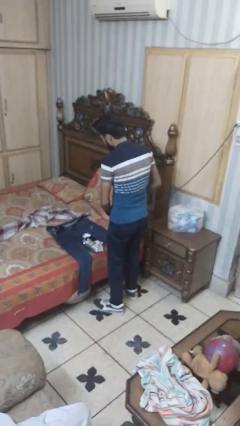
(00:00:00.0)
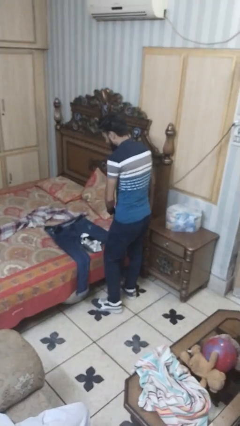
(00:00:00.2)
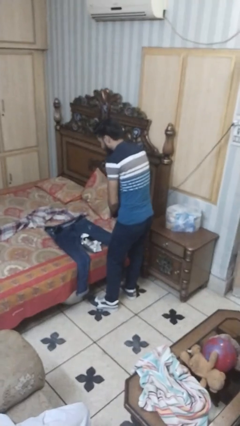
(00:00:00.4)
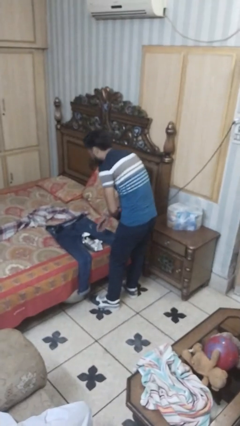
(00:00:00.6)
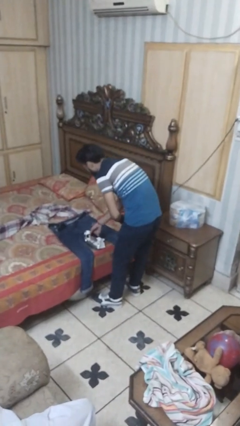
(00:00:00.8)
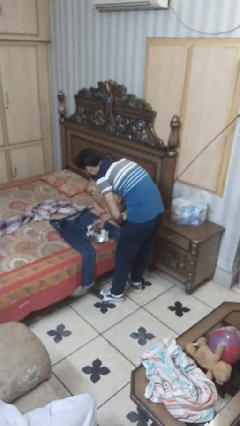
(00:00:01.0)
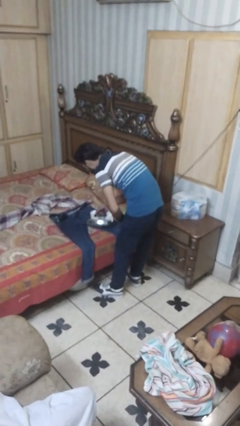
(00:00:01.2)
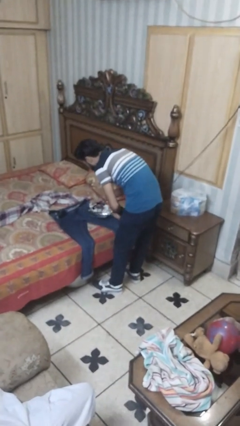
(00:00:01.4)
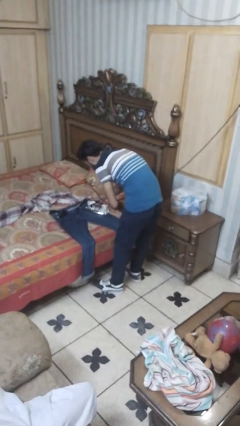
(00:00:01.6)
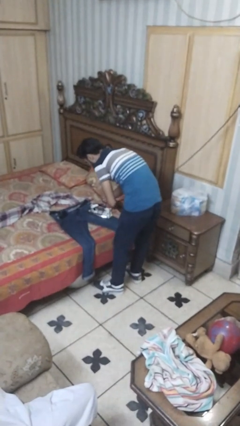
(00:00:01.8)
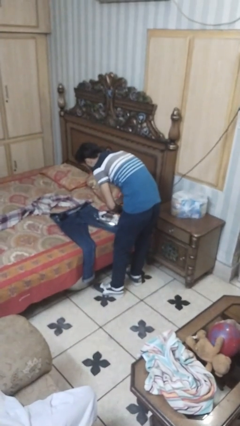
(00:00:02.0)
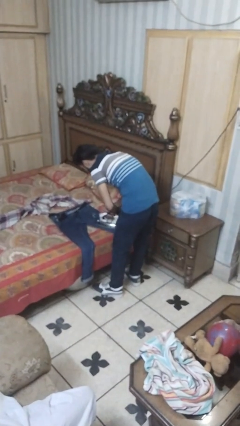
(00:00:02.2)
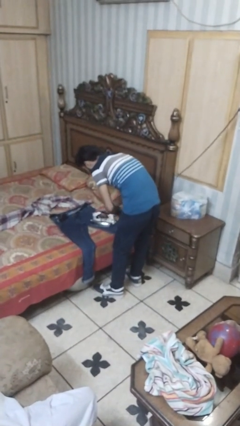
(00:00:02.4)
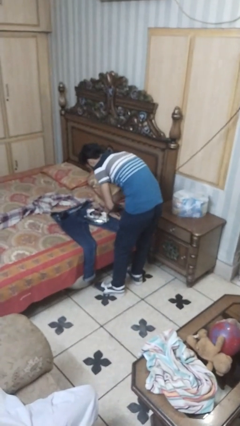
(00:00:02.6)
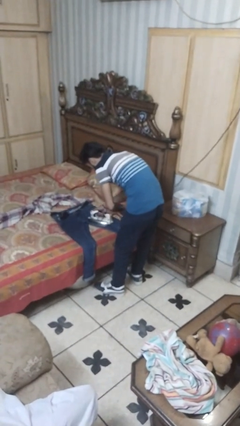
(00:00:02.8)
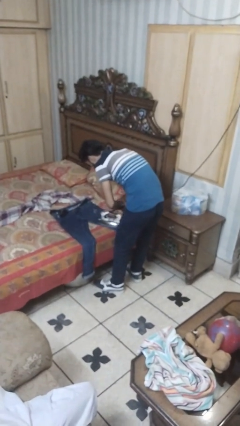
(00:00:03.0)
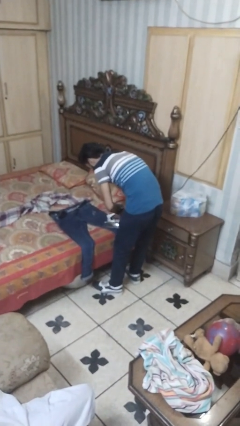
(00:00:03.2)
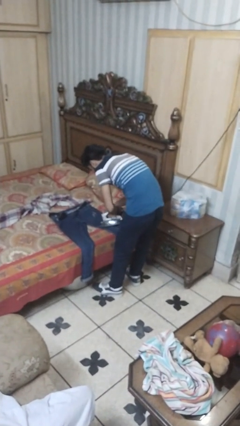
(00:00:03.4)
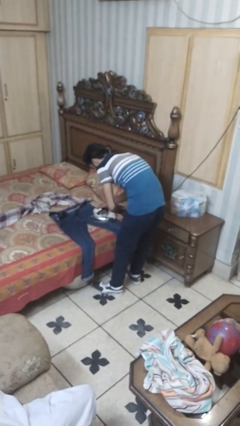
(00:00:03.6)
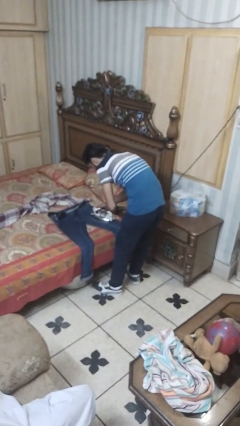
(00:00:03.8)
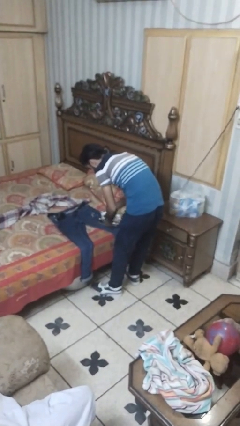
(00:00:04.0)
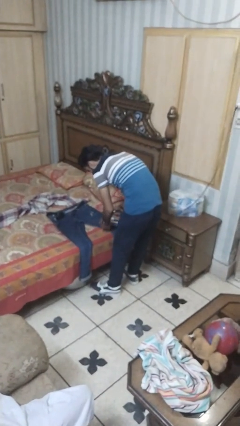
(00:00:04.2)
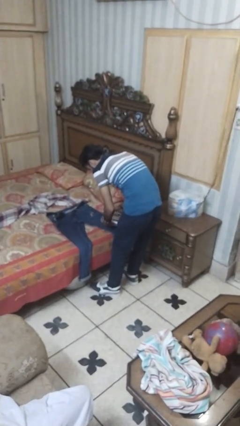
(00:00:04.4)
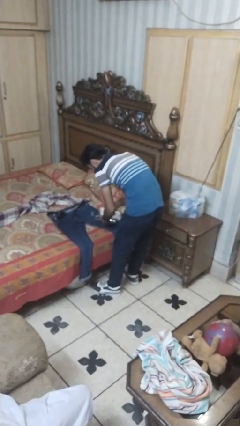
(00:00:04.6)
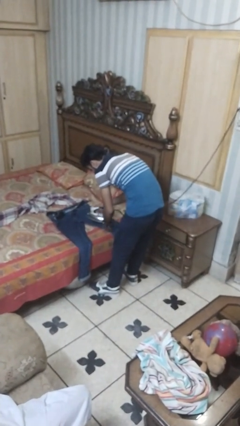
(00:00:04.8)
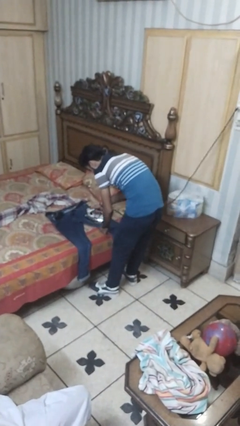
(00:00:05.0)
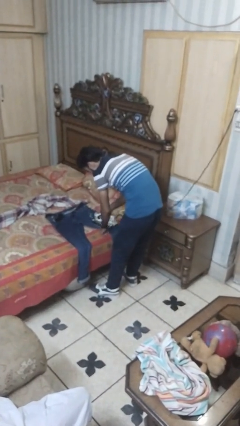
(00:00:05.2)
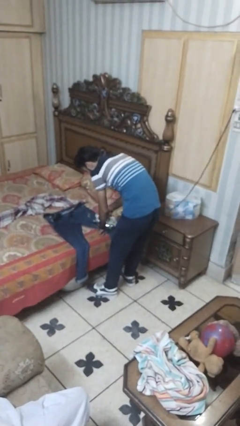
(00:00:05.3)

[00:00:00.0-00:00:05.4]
person irons clothes

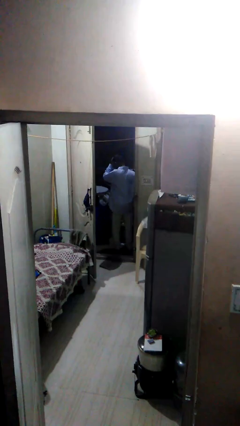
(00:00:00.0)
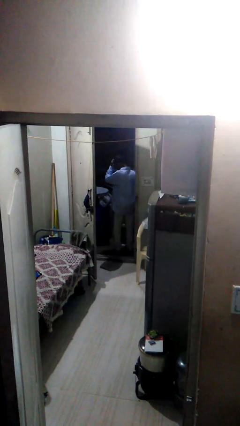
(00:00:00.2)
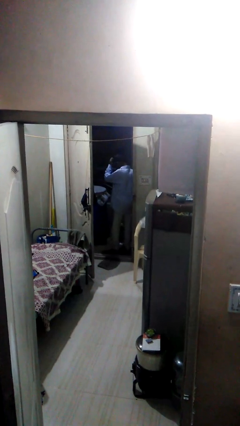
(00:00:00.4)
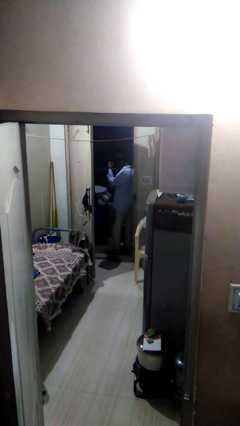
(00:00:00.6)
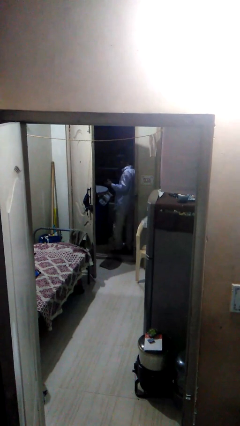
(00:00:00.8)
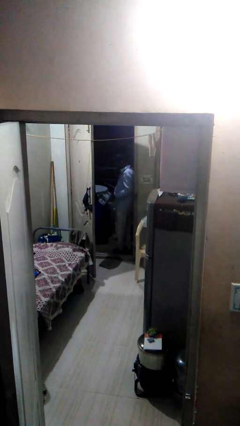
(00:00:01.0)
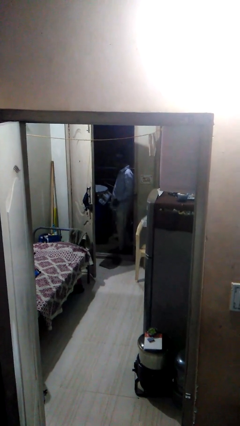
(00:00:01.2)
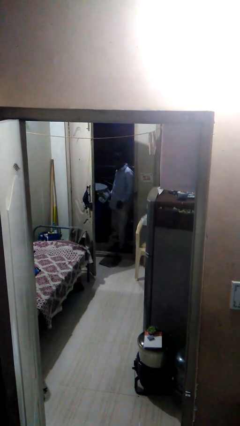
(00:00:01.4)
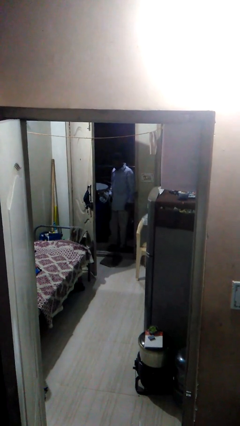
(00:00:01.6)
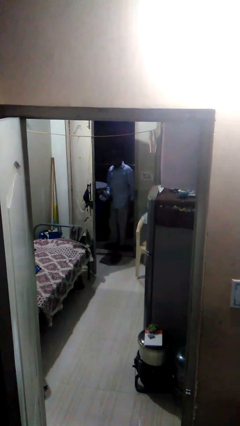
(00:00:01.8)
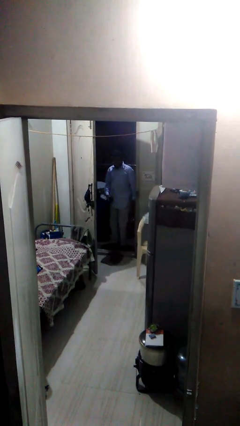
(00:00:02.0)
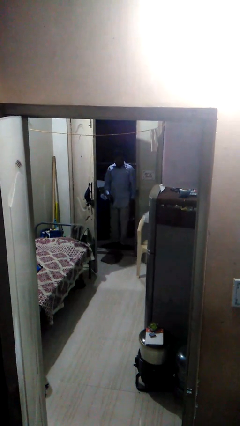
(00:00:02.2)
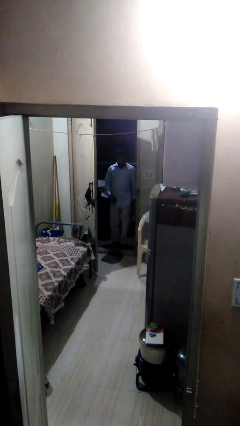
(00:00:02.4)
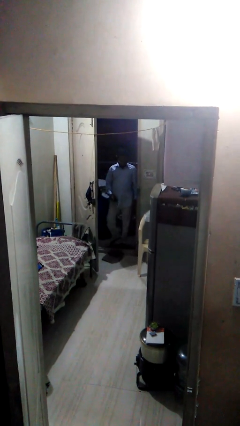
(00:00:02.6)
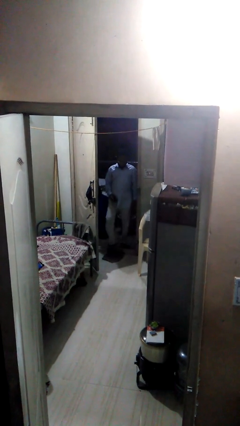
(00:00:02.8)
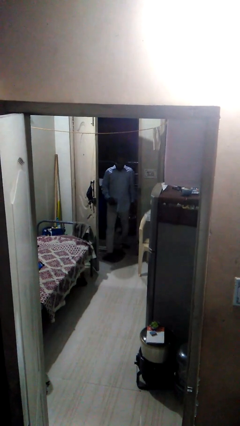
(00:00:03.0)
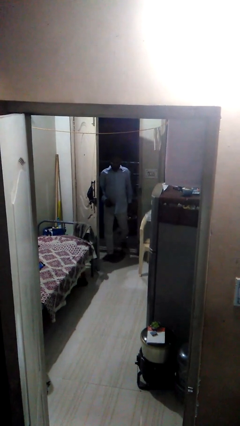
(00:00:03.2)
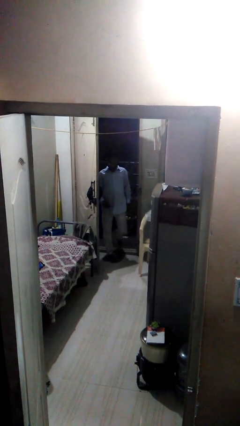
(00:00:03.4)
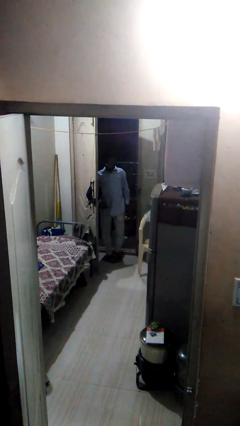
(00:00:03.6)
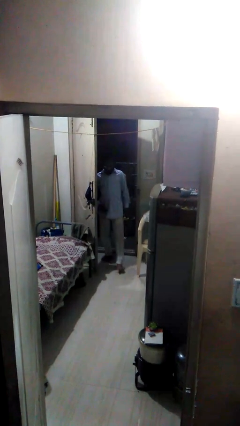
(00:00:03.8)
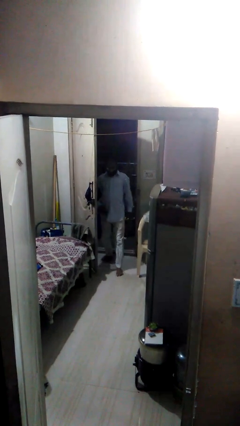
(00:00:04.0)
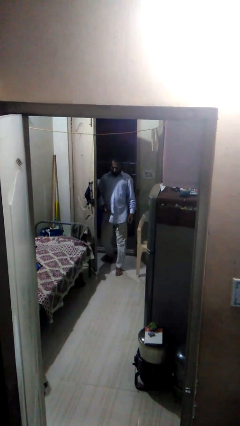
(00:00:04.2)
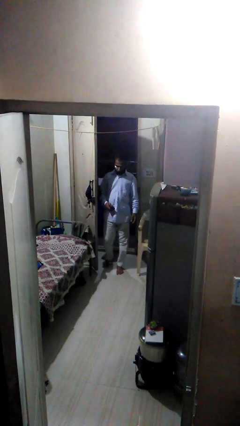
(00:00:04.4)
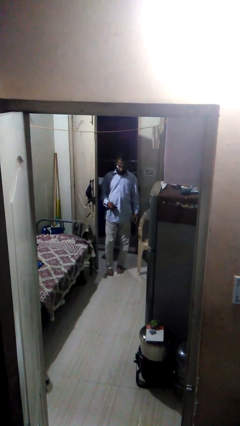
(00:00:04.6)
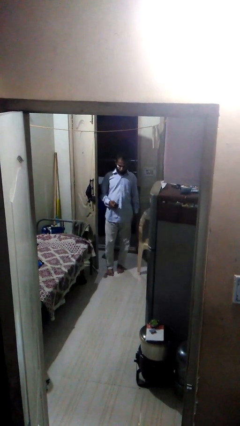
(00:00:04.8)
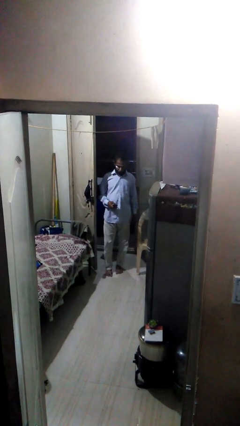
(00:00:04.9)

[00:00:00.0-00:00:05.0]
person enters scene through structure

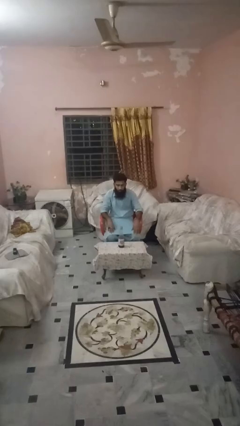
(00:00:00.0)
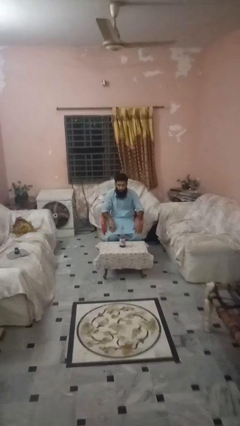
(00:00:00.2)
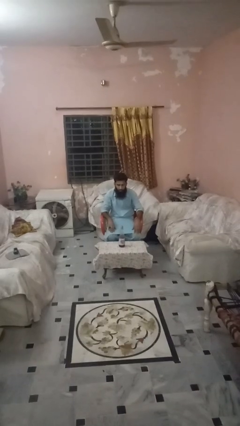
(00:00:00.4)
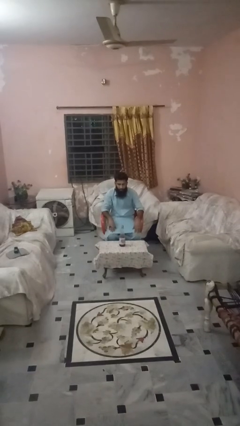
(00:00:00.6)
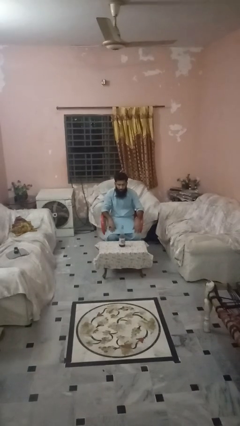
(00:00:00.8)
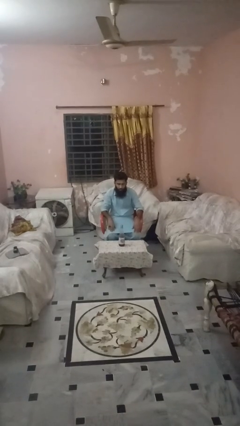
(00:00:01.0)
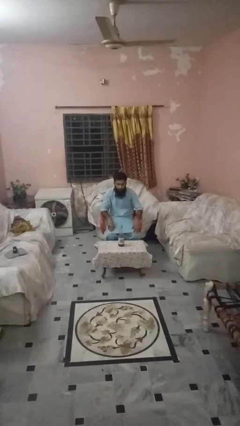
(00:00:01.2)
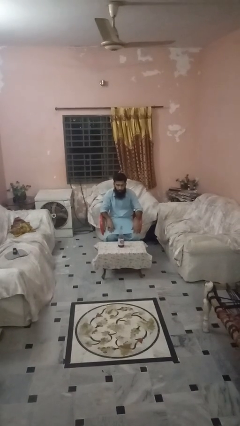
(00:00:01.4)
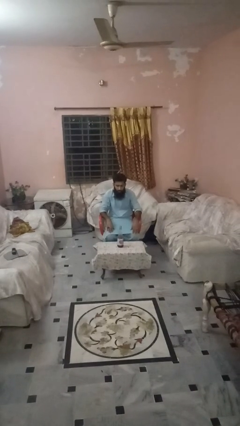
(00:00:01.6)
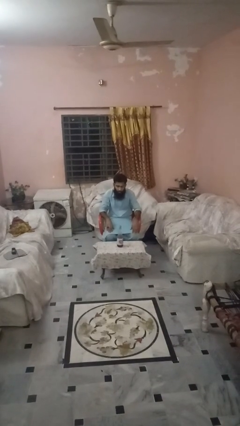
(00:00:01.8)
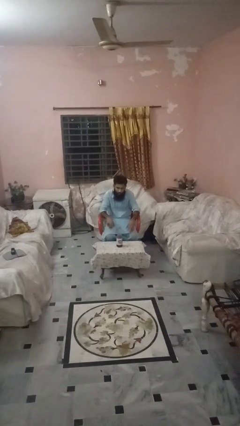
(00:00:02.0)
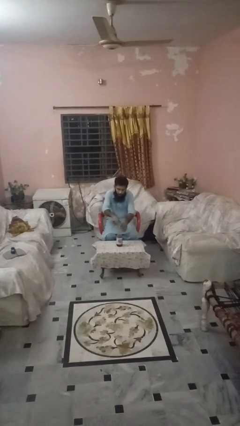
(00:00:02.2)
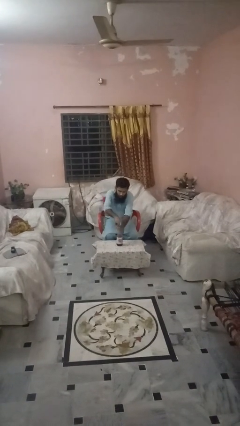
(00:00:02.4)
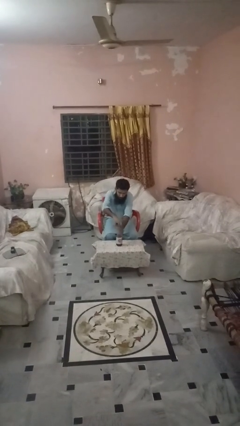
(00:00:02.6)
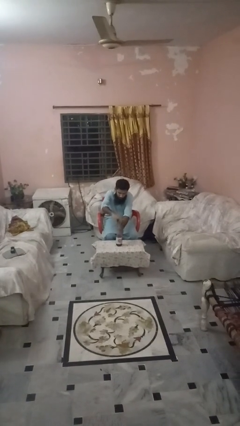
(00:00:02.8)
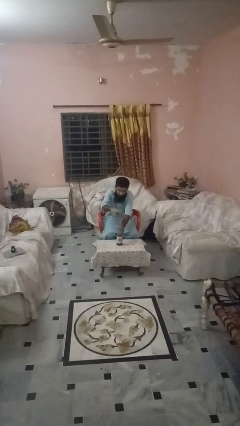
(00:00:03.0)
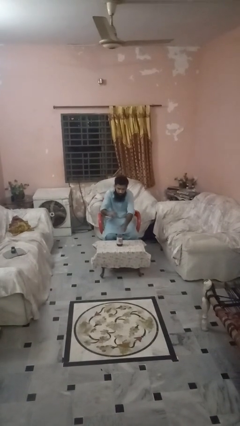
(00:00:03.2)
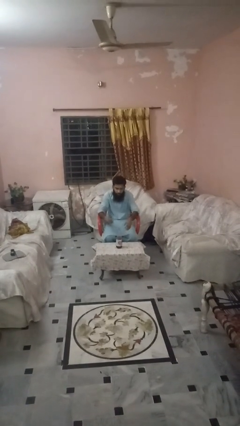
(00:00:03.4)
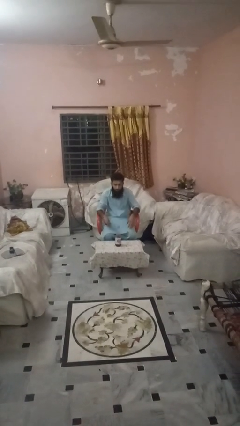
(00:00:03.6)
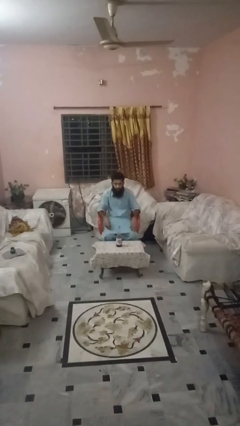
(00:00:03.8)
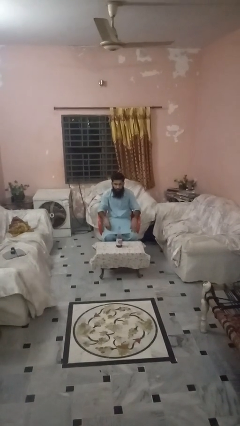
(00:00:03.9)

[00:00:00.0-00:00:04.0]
person unscrews lid from bottle

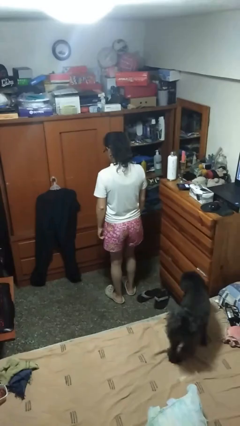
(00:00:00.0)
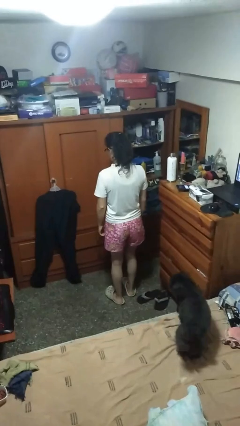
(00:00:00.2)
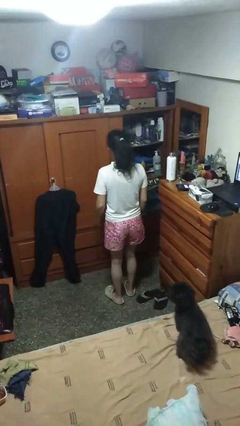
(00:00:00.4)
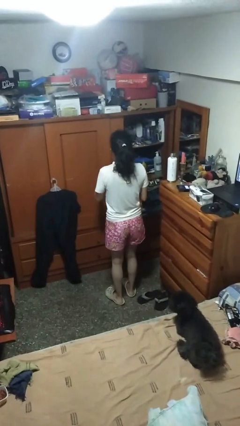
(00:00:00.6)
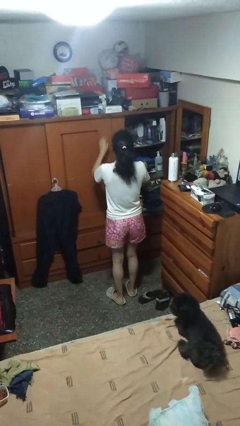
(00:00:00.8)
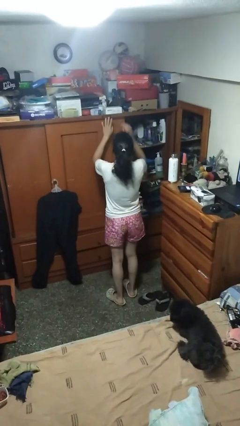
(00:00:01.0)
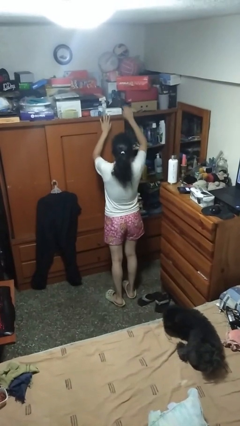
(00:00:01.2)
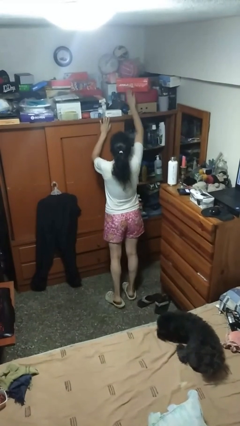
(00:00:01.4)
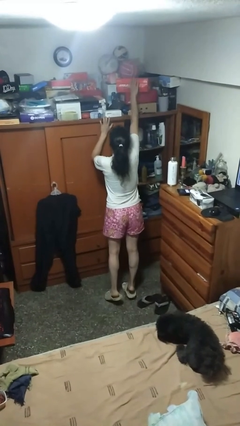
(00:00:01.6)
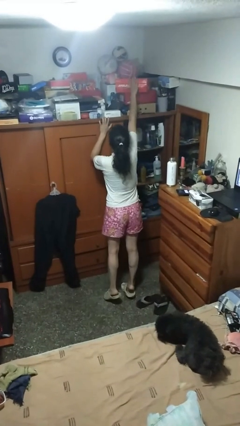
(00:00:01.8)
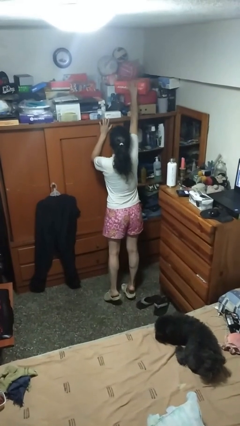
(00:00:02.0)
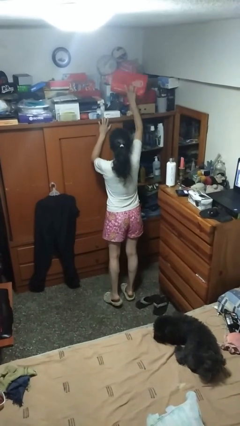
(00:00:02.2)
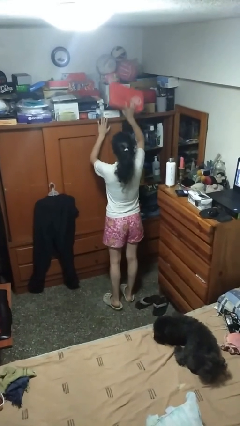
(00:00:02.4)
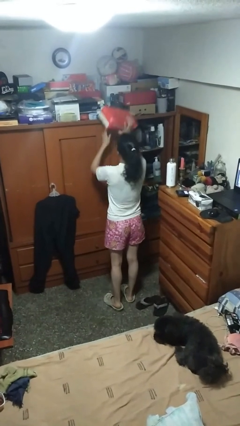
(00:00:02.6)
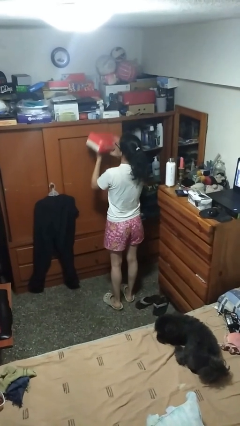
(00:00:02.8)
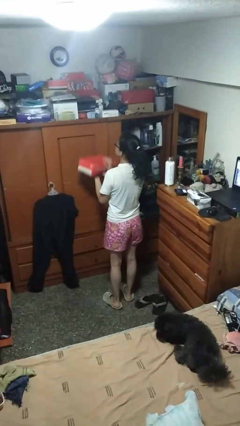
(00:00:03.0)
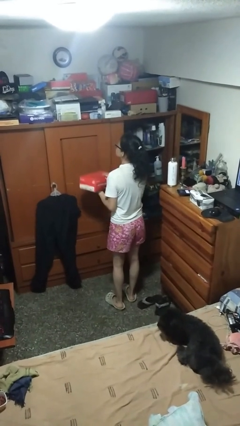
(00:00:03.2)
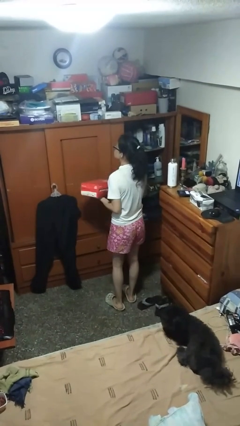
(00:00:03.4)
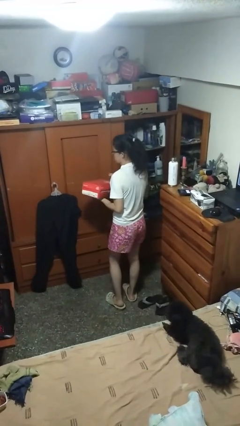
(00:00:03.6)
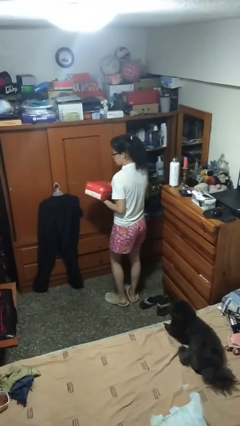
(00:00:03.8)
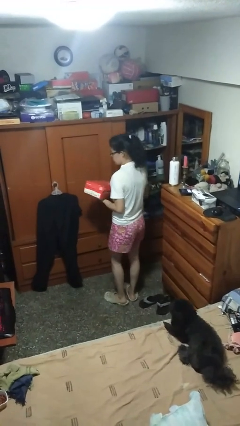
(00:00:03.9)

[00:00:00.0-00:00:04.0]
person picks up object from shelf
